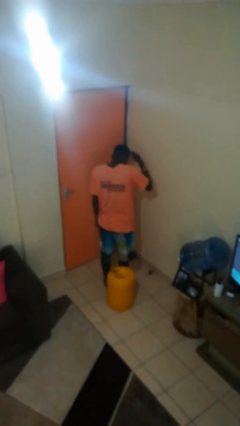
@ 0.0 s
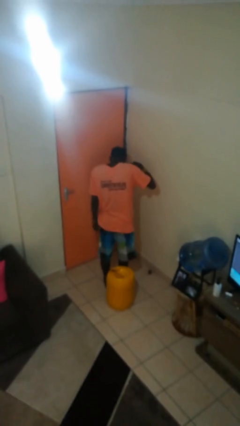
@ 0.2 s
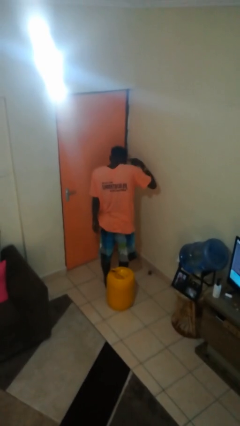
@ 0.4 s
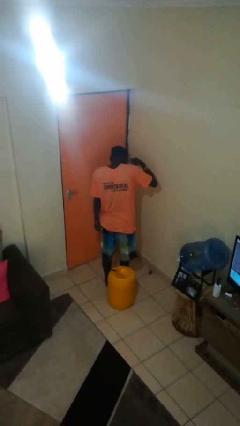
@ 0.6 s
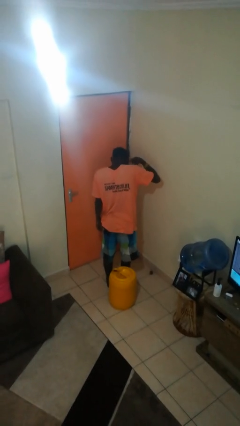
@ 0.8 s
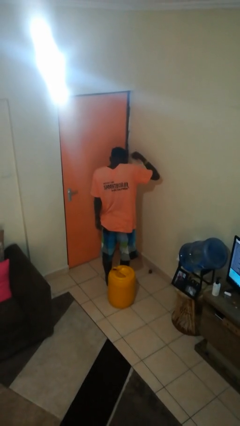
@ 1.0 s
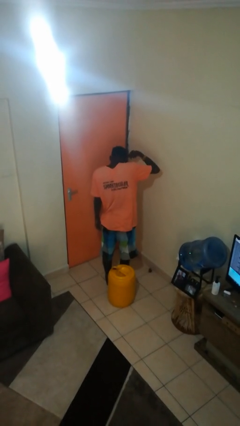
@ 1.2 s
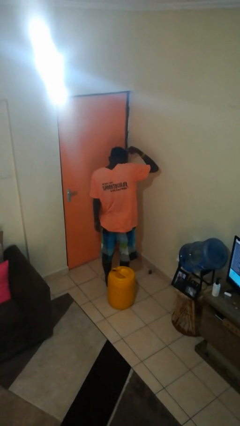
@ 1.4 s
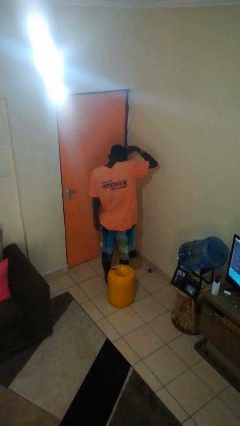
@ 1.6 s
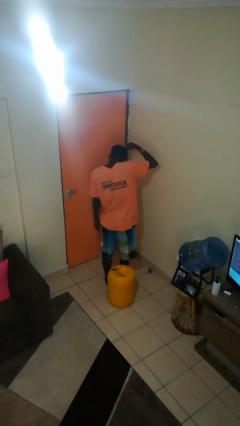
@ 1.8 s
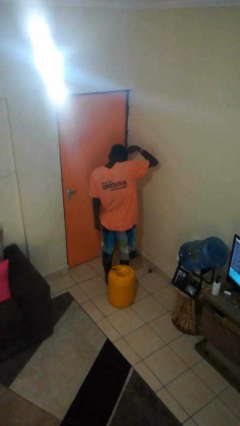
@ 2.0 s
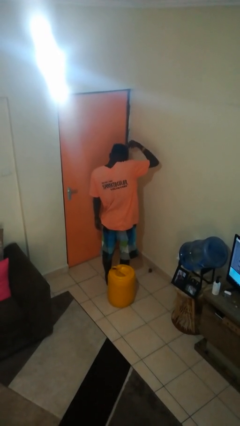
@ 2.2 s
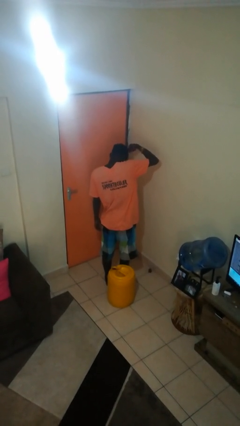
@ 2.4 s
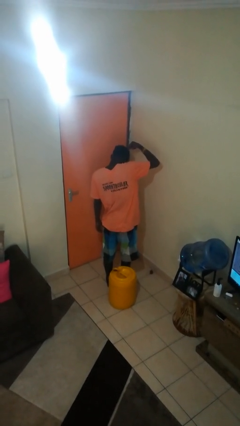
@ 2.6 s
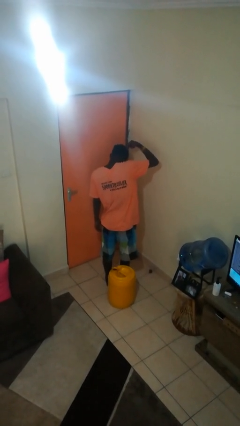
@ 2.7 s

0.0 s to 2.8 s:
person brushes hair

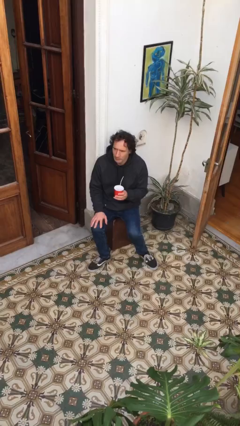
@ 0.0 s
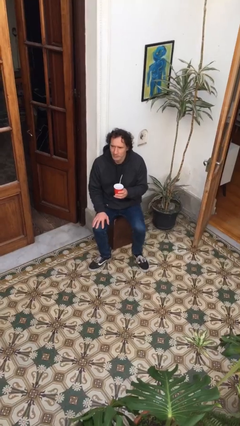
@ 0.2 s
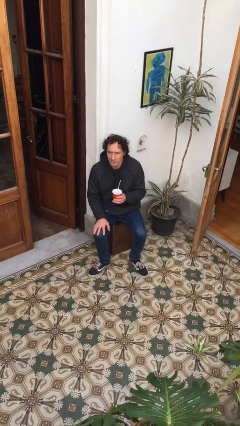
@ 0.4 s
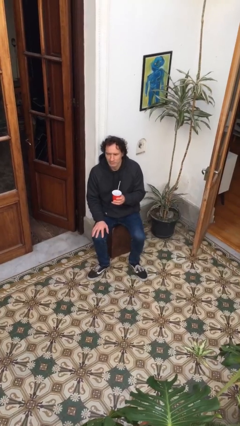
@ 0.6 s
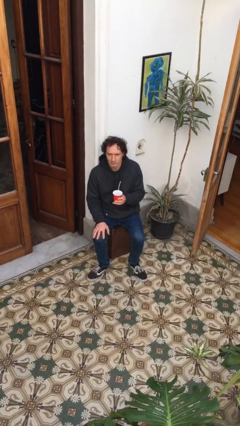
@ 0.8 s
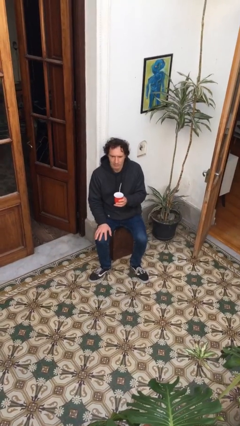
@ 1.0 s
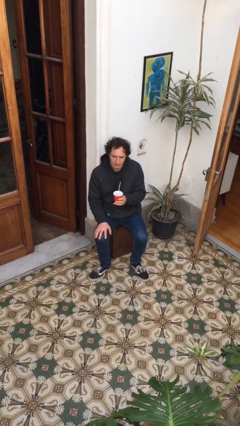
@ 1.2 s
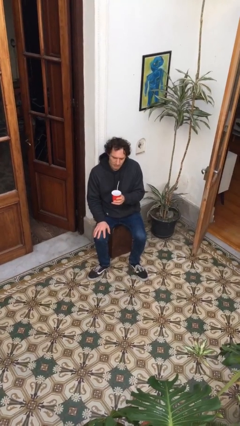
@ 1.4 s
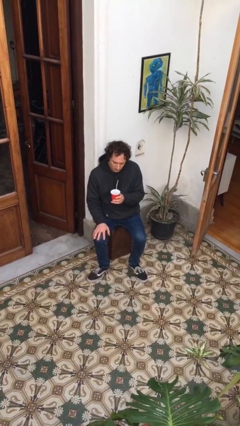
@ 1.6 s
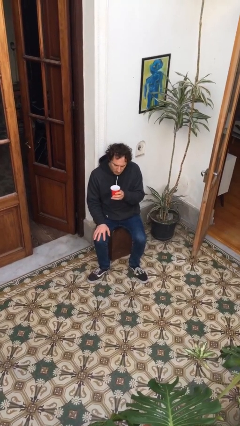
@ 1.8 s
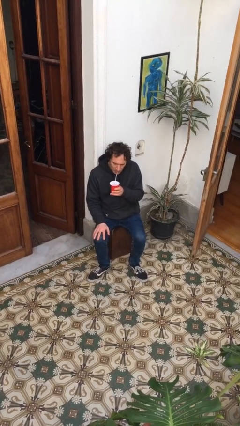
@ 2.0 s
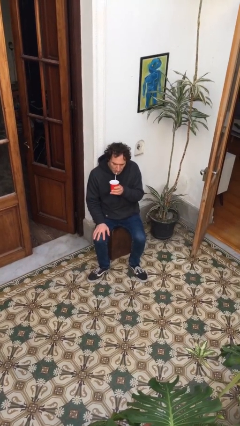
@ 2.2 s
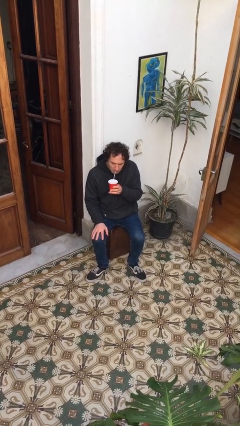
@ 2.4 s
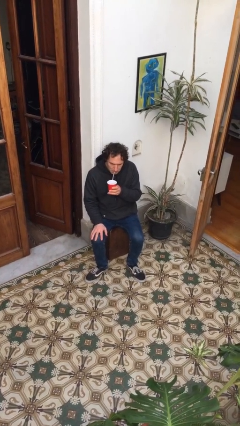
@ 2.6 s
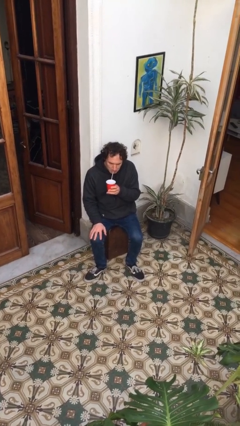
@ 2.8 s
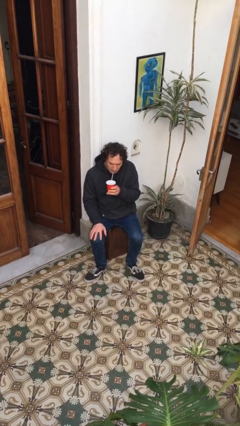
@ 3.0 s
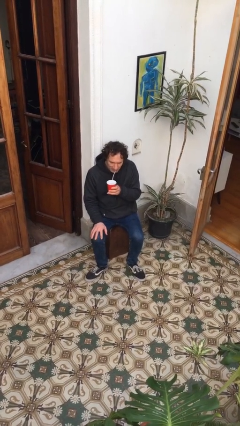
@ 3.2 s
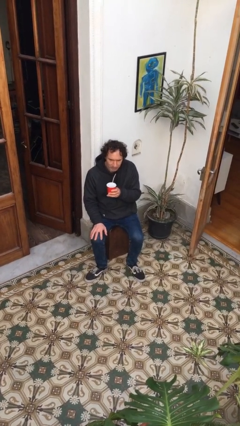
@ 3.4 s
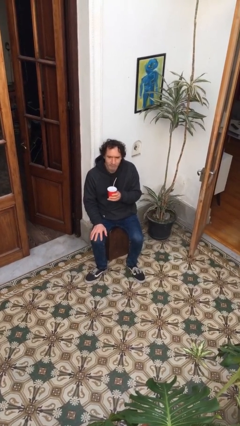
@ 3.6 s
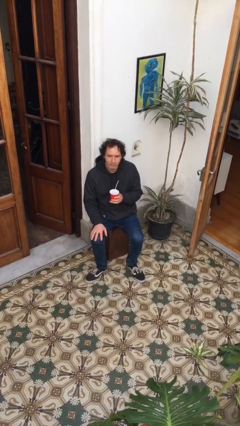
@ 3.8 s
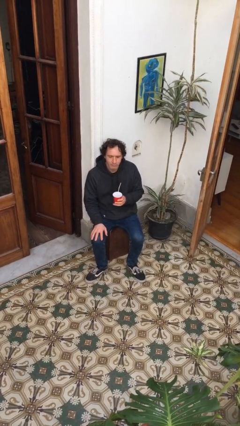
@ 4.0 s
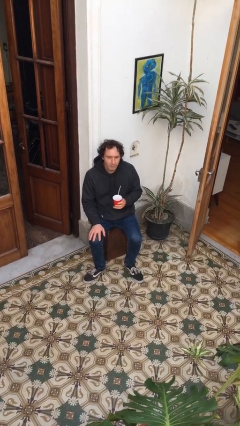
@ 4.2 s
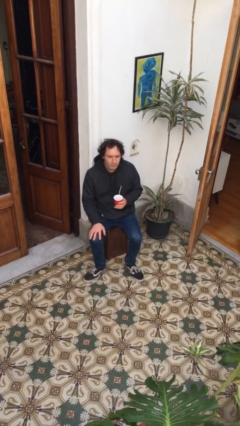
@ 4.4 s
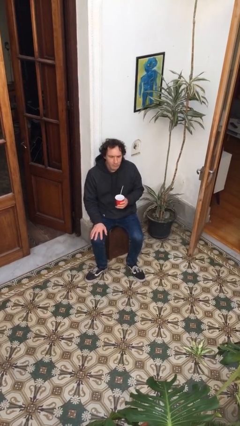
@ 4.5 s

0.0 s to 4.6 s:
person drinks from straw

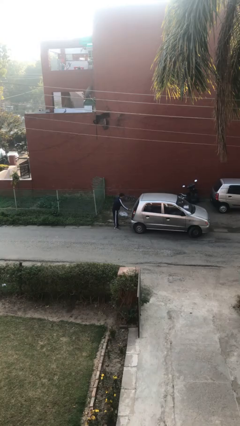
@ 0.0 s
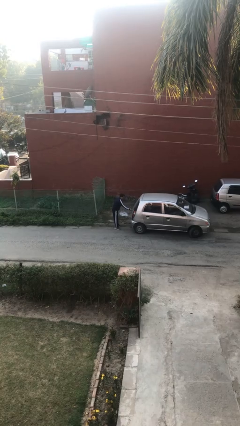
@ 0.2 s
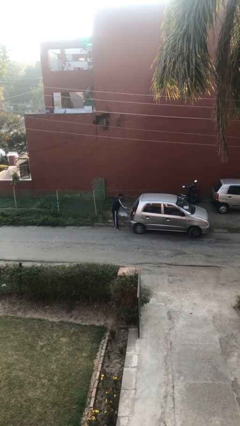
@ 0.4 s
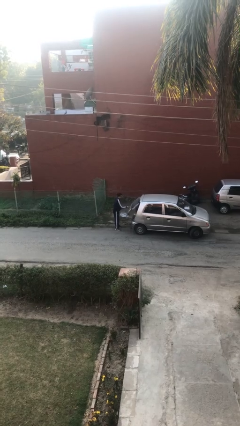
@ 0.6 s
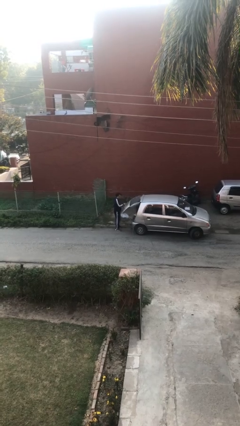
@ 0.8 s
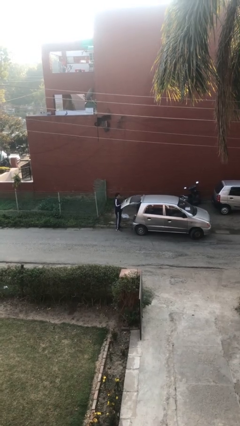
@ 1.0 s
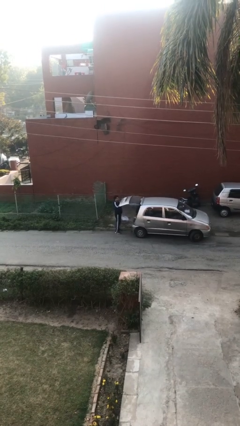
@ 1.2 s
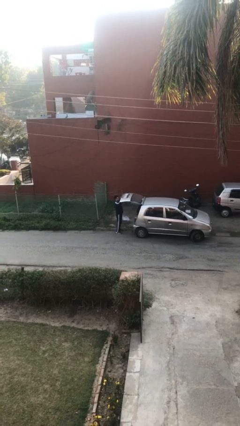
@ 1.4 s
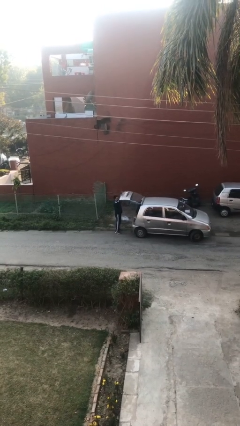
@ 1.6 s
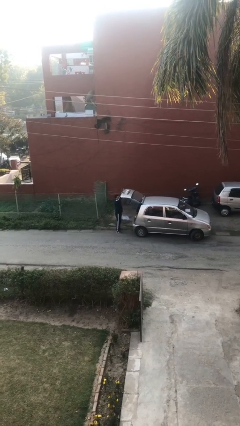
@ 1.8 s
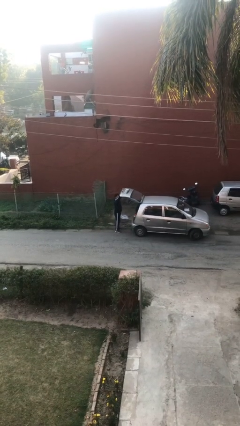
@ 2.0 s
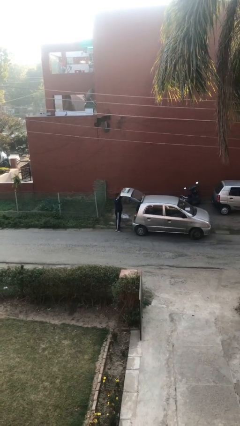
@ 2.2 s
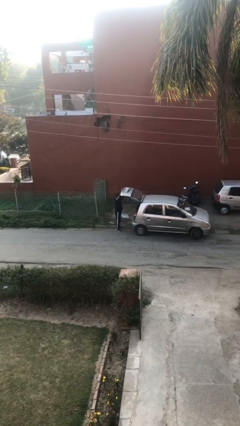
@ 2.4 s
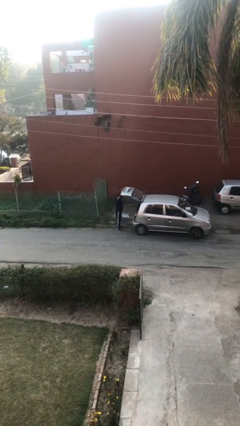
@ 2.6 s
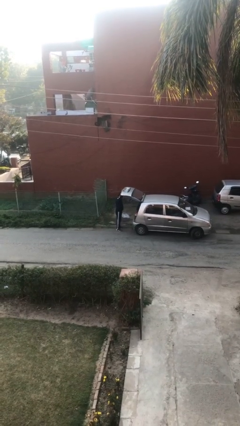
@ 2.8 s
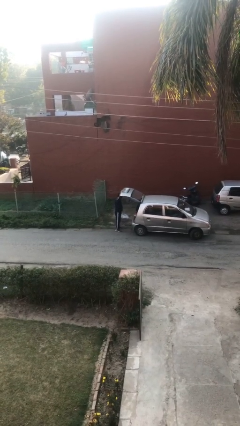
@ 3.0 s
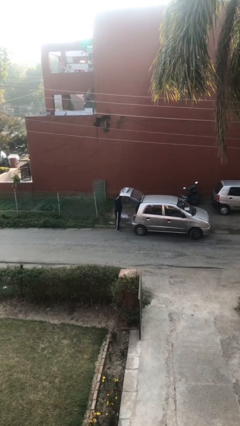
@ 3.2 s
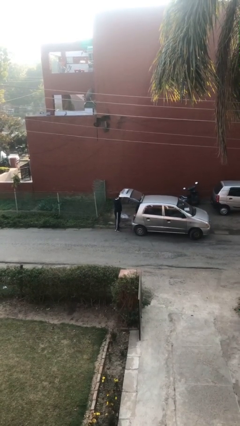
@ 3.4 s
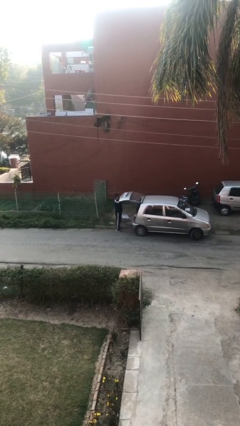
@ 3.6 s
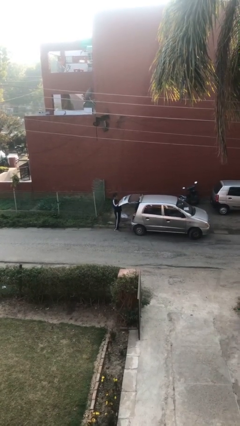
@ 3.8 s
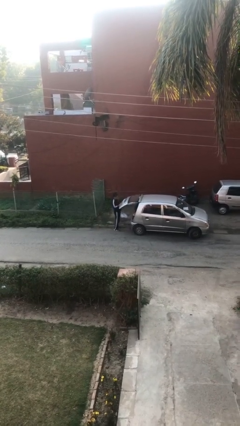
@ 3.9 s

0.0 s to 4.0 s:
person opens car trunk

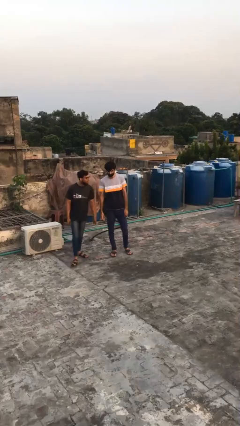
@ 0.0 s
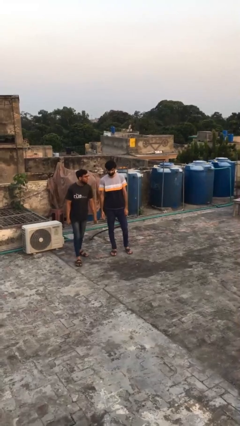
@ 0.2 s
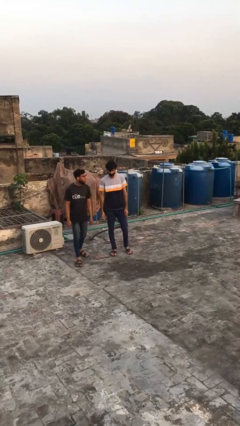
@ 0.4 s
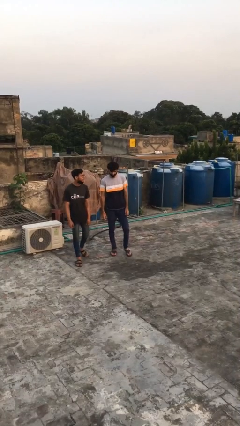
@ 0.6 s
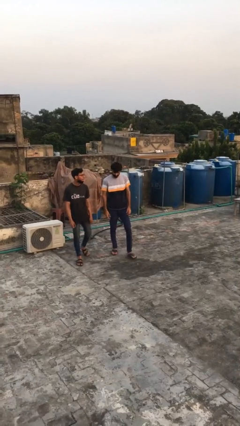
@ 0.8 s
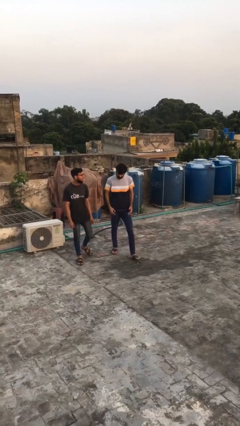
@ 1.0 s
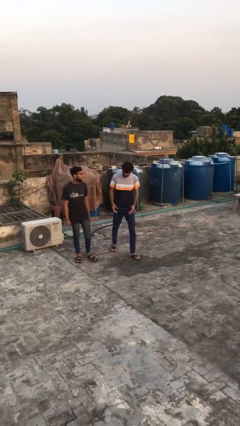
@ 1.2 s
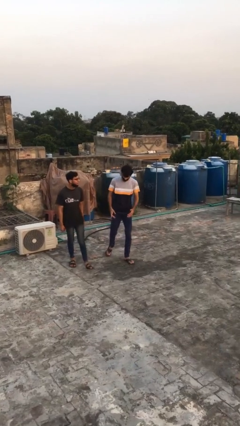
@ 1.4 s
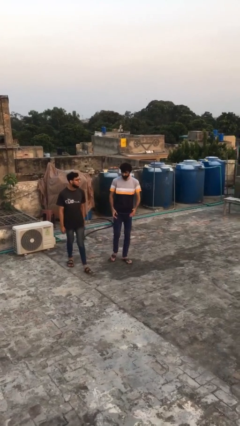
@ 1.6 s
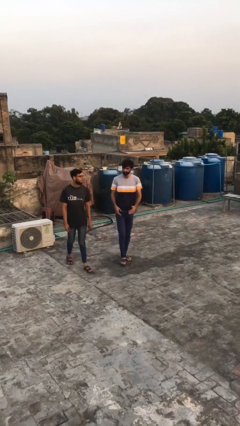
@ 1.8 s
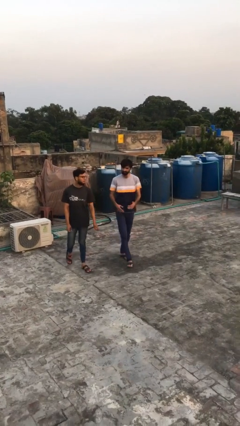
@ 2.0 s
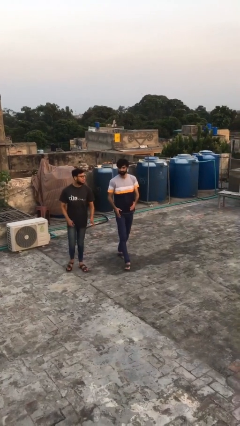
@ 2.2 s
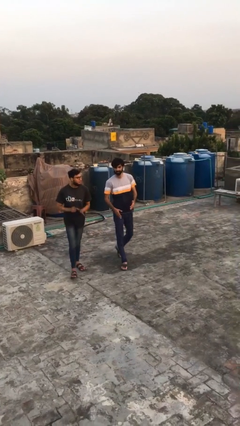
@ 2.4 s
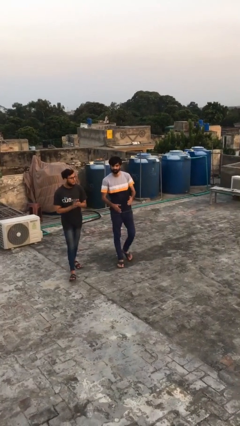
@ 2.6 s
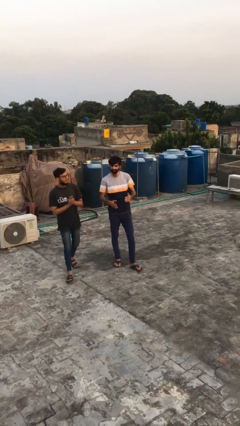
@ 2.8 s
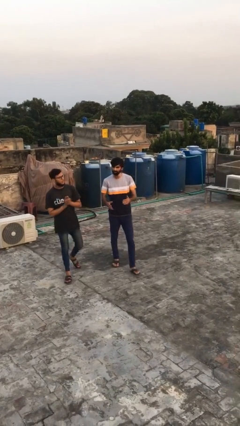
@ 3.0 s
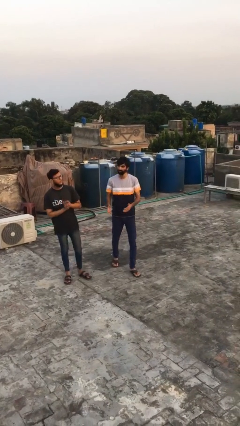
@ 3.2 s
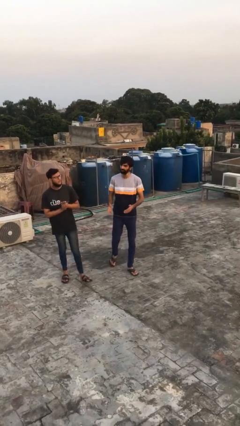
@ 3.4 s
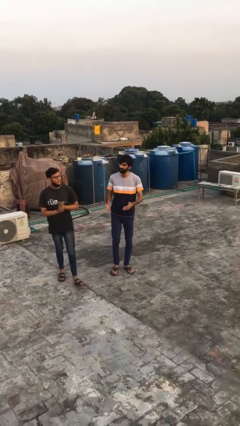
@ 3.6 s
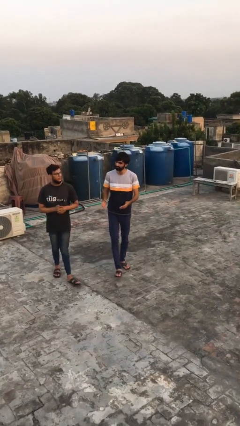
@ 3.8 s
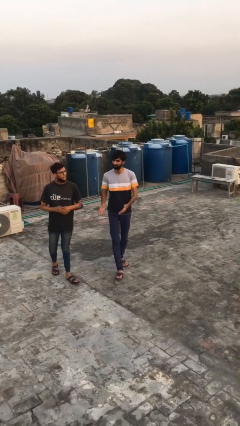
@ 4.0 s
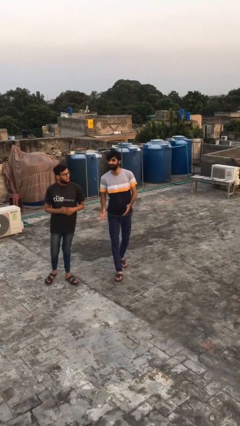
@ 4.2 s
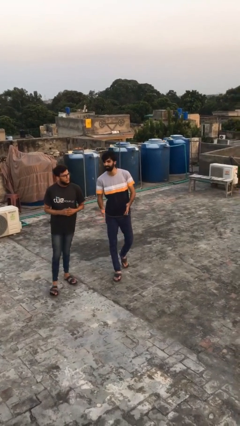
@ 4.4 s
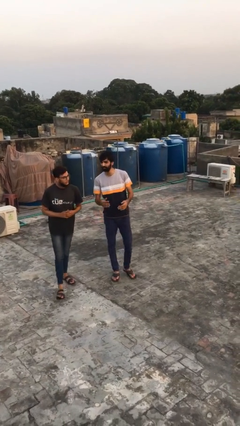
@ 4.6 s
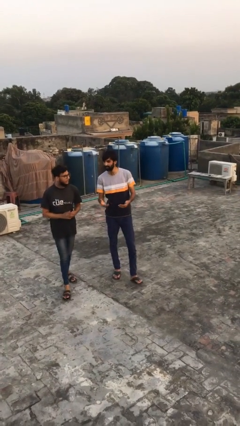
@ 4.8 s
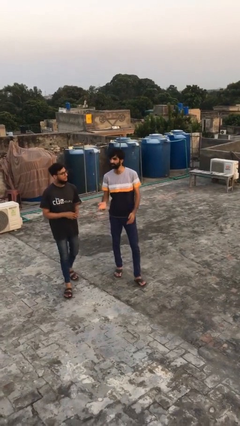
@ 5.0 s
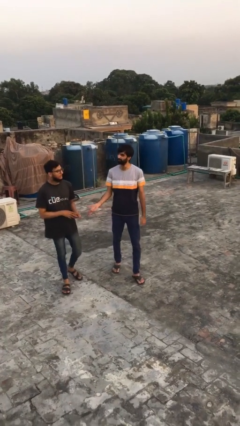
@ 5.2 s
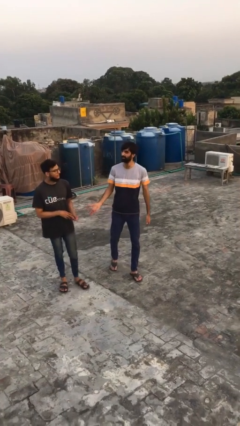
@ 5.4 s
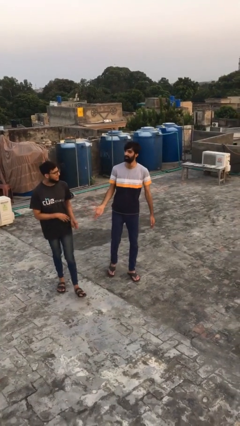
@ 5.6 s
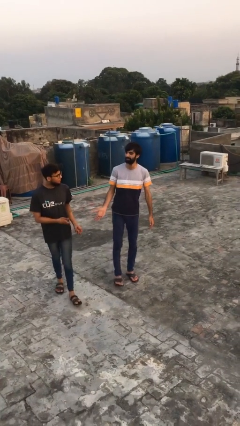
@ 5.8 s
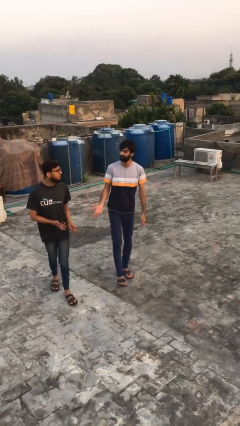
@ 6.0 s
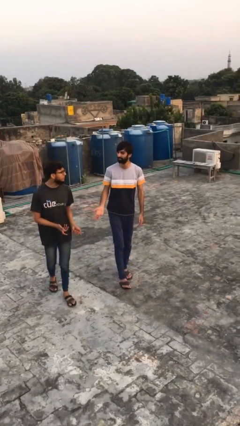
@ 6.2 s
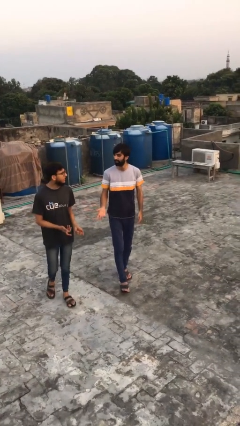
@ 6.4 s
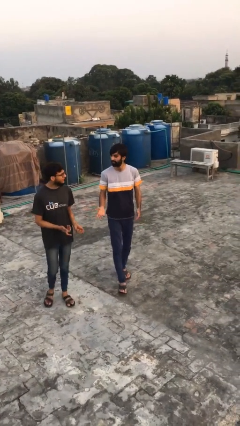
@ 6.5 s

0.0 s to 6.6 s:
person talks to person
